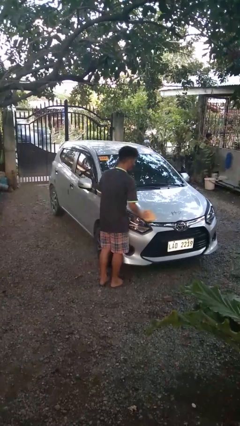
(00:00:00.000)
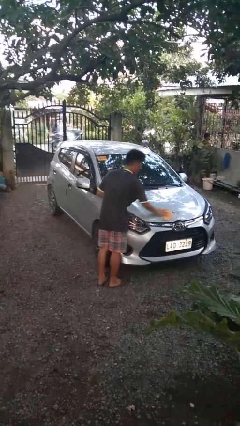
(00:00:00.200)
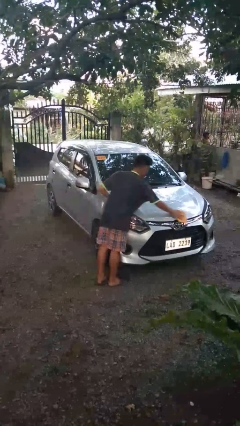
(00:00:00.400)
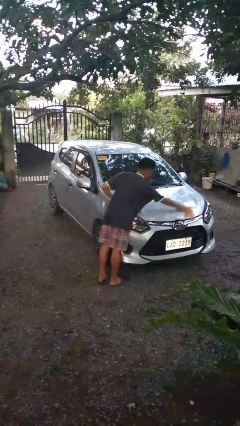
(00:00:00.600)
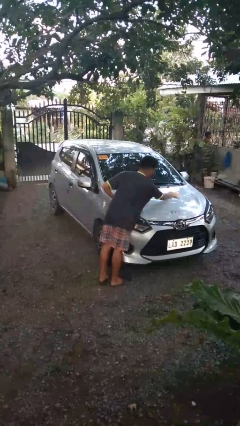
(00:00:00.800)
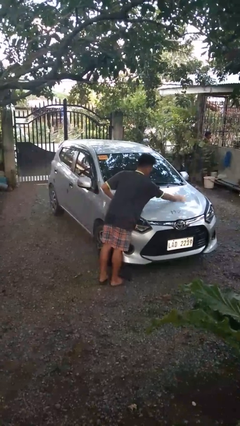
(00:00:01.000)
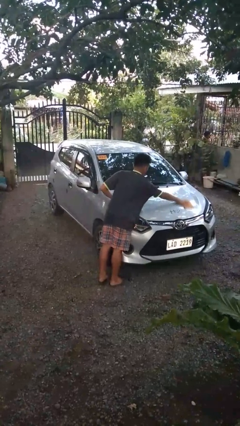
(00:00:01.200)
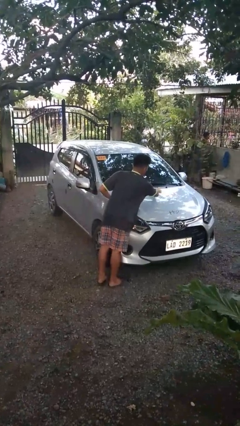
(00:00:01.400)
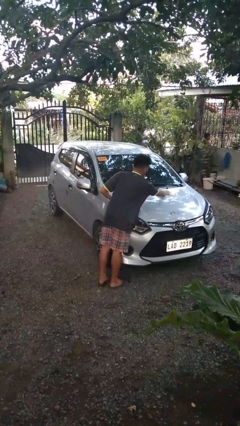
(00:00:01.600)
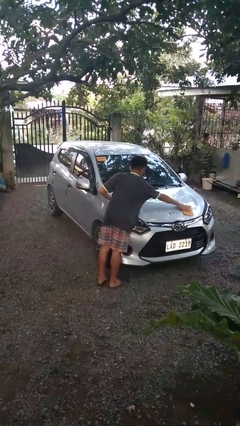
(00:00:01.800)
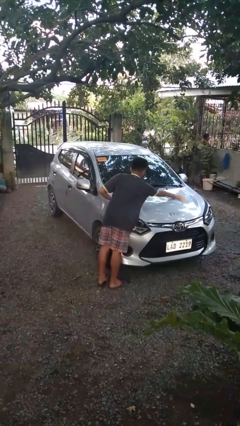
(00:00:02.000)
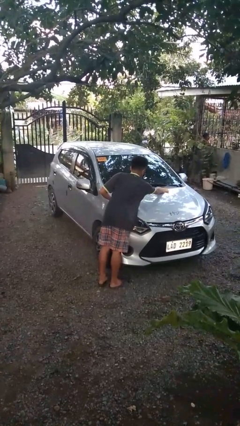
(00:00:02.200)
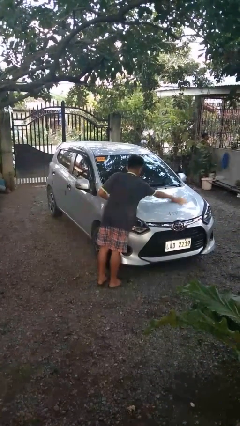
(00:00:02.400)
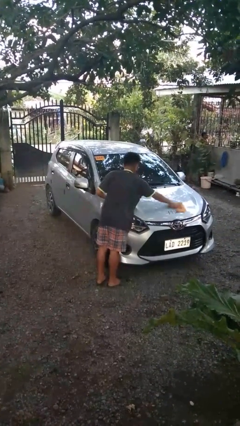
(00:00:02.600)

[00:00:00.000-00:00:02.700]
person polishes car with rag

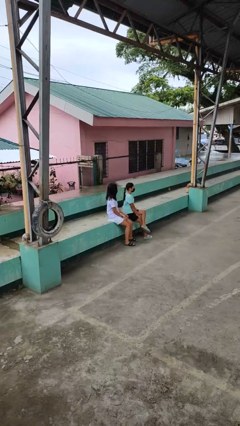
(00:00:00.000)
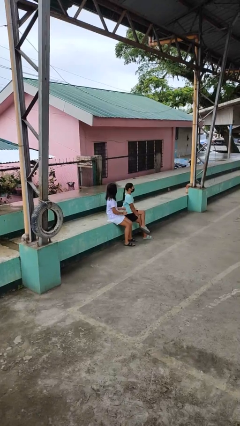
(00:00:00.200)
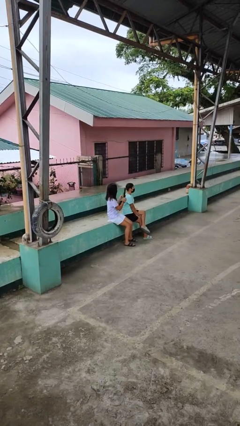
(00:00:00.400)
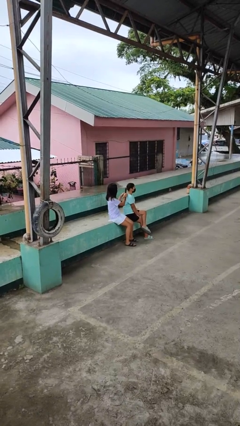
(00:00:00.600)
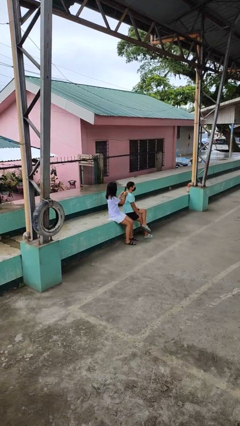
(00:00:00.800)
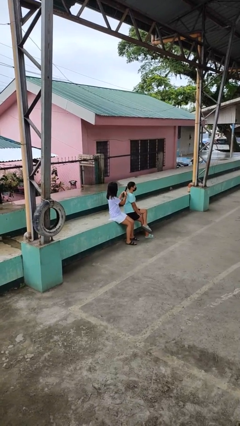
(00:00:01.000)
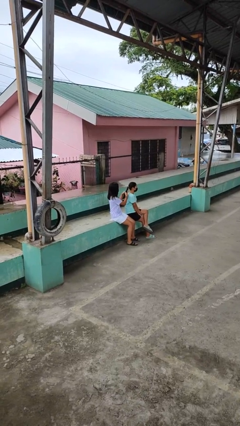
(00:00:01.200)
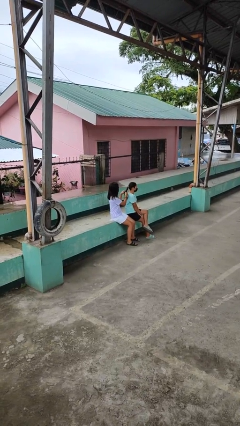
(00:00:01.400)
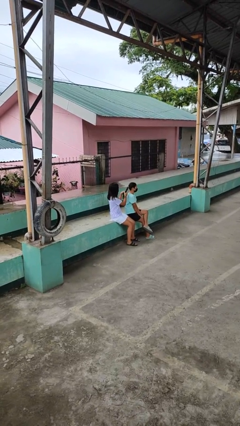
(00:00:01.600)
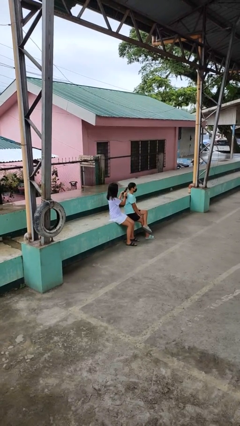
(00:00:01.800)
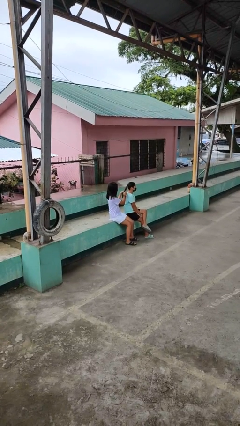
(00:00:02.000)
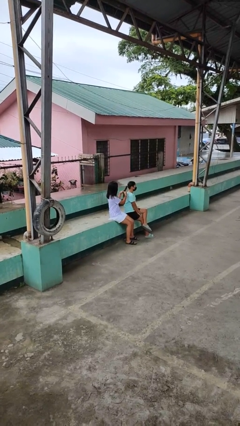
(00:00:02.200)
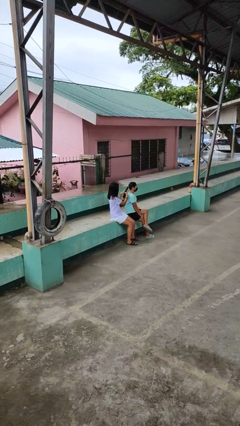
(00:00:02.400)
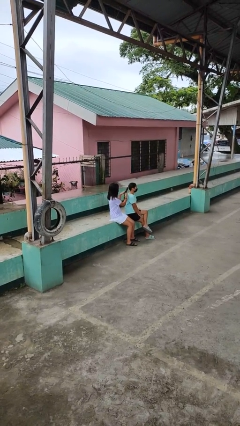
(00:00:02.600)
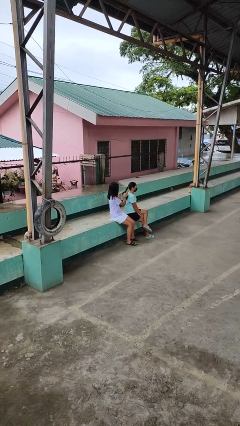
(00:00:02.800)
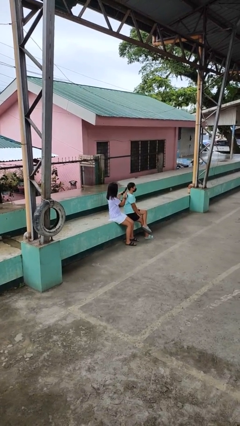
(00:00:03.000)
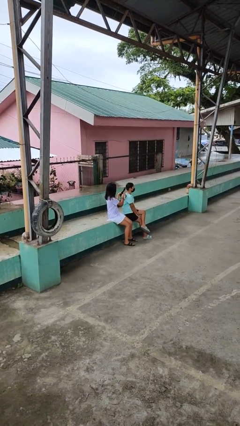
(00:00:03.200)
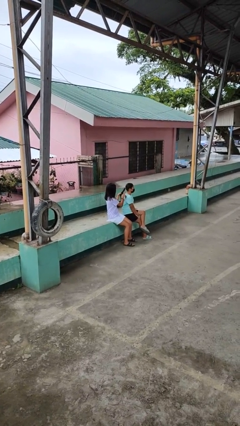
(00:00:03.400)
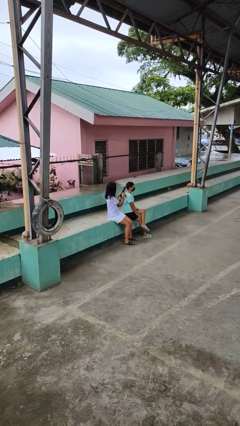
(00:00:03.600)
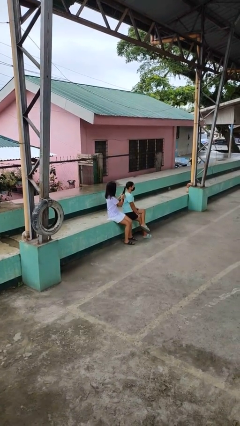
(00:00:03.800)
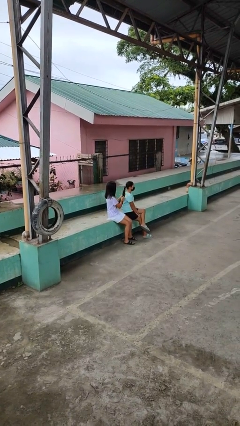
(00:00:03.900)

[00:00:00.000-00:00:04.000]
person braids hair of person

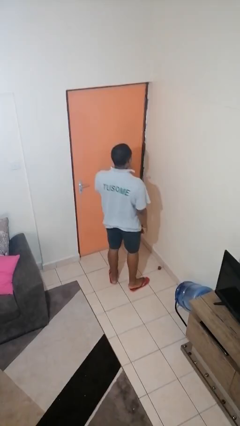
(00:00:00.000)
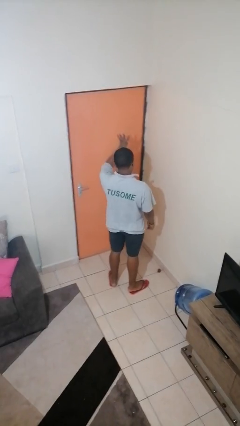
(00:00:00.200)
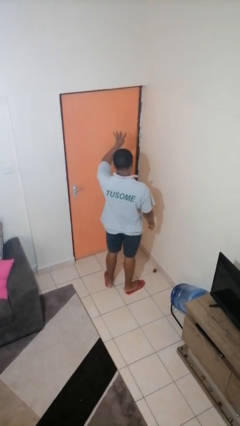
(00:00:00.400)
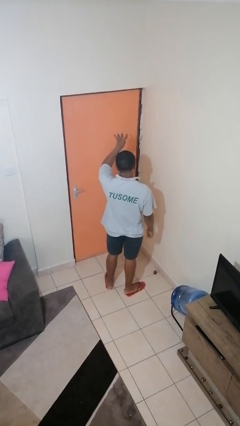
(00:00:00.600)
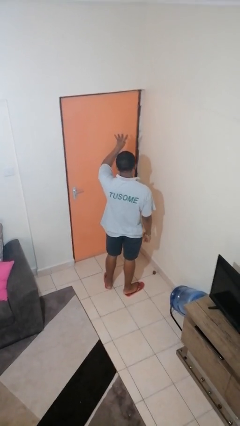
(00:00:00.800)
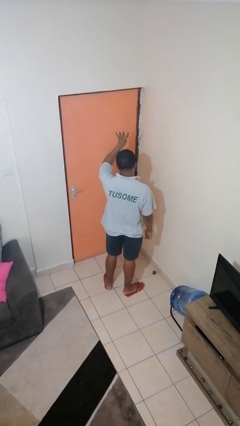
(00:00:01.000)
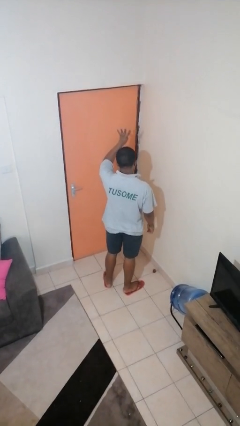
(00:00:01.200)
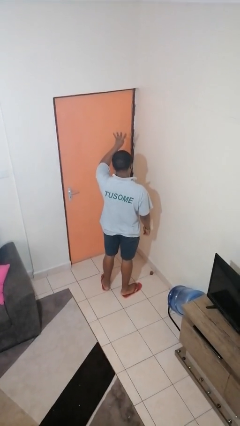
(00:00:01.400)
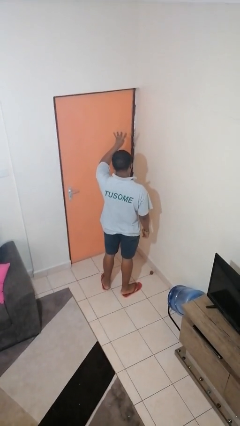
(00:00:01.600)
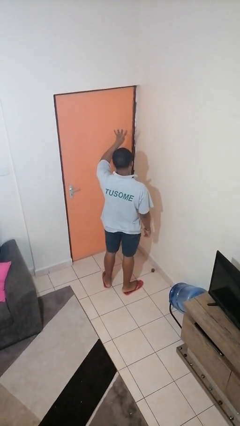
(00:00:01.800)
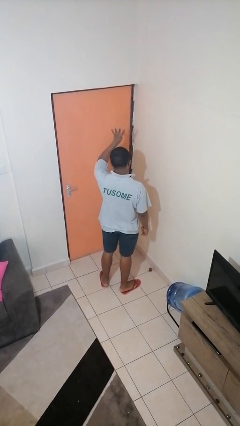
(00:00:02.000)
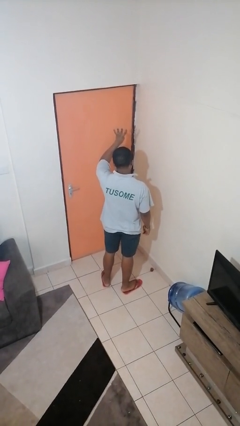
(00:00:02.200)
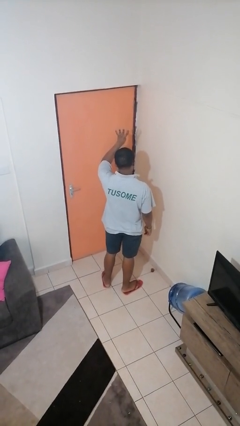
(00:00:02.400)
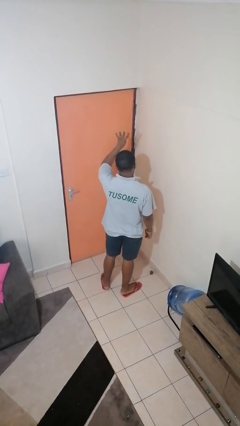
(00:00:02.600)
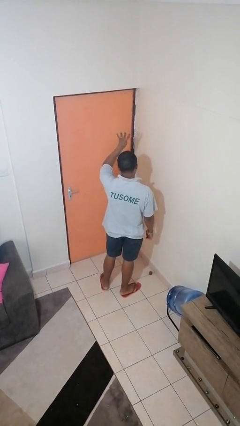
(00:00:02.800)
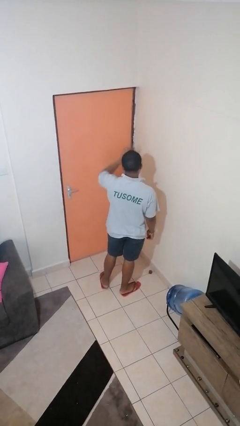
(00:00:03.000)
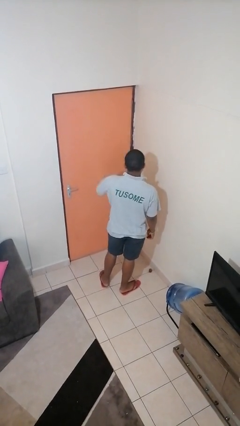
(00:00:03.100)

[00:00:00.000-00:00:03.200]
person gestures number four

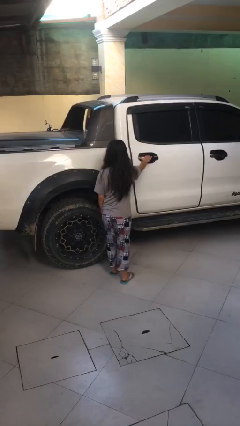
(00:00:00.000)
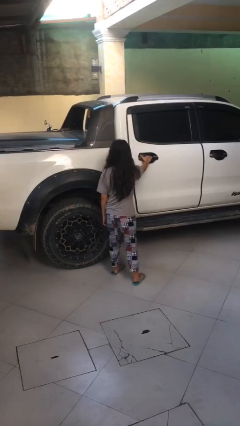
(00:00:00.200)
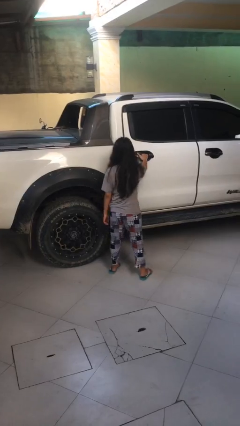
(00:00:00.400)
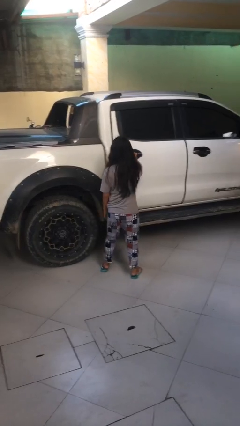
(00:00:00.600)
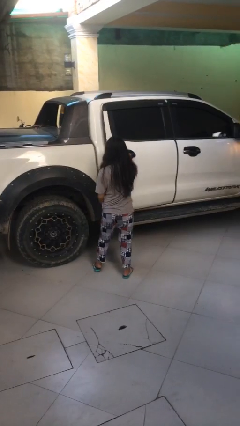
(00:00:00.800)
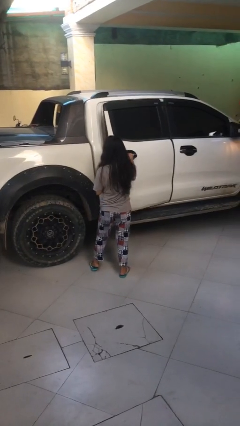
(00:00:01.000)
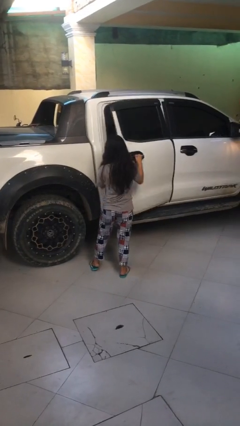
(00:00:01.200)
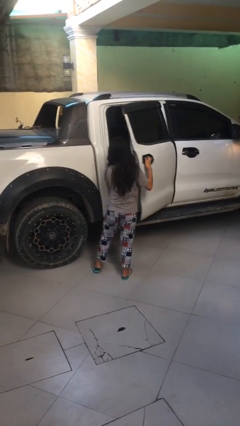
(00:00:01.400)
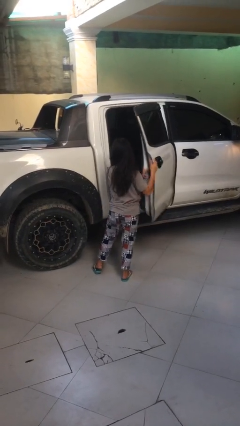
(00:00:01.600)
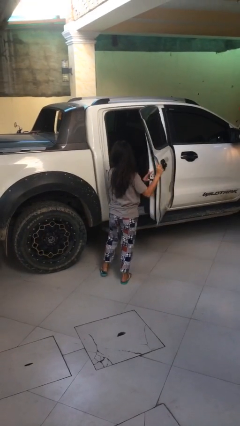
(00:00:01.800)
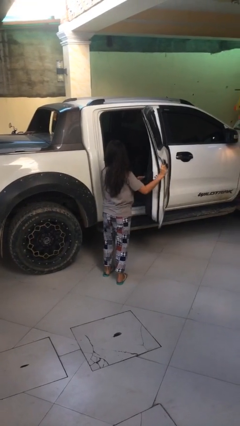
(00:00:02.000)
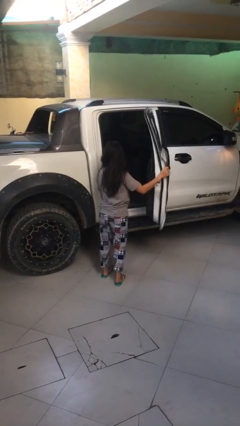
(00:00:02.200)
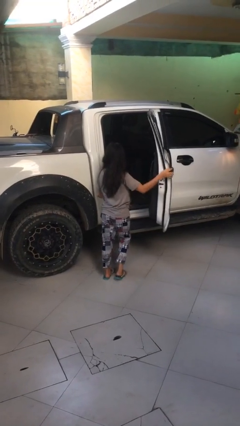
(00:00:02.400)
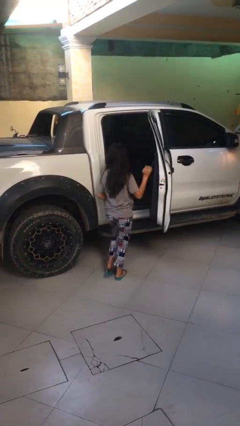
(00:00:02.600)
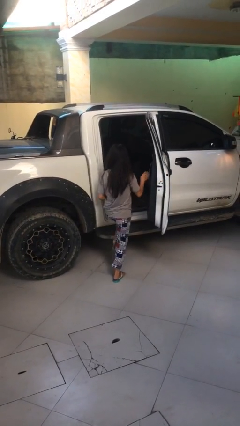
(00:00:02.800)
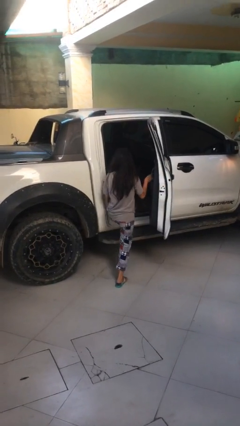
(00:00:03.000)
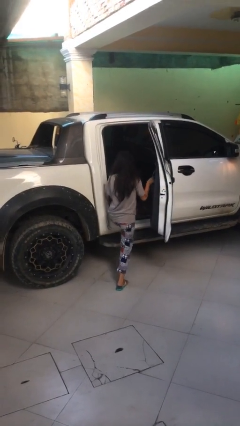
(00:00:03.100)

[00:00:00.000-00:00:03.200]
person opens car door

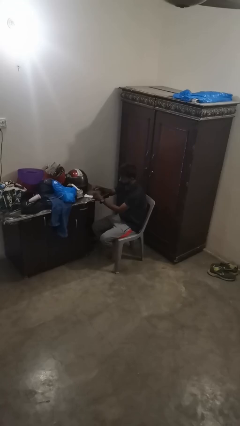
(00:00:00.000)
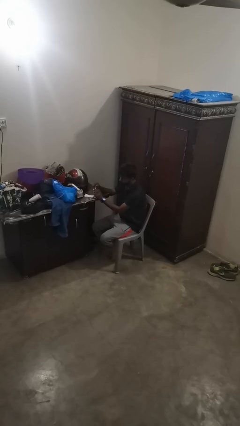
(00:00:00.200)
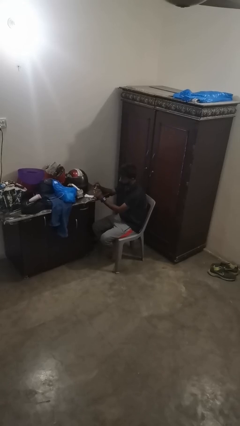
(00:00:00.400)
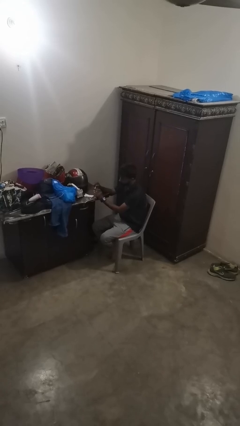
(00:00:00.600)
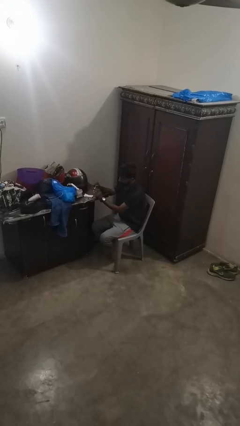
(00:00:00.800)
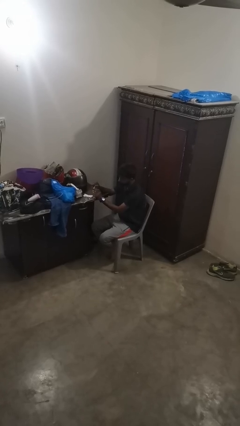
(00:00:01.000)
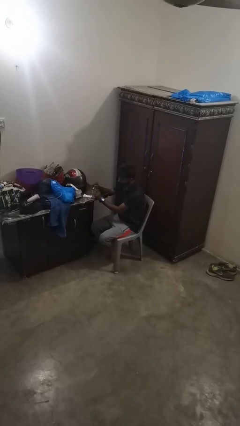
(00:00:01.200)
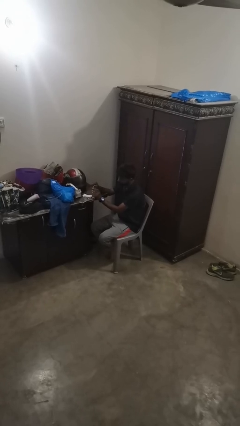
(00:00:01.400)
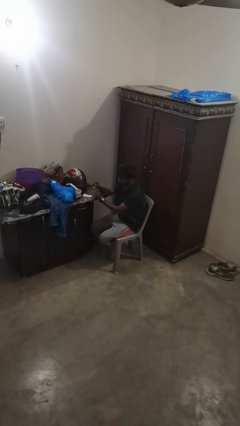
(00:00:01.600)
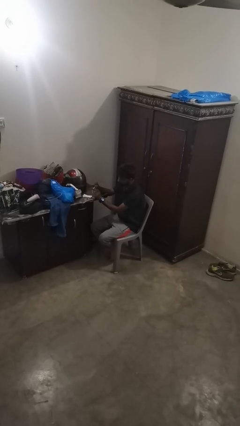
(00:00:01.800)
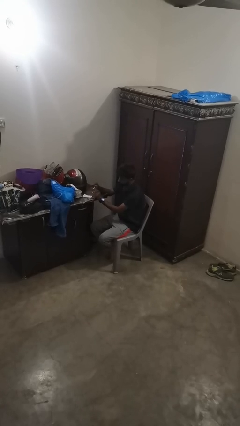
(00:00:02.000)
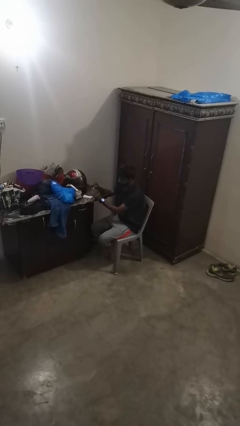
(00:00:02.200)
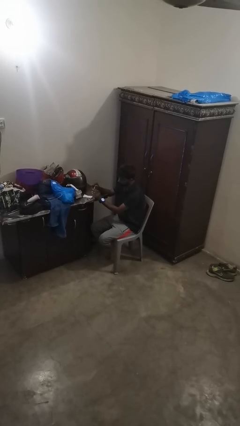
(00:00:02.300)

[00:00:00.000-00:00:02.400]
person paints fingernails

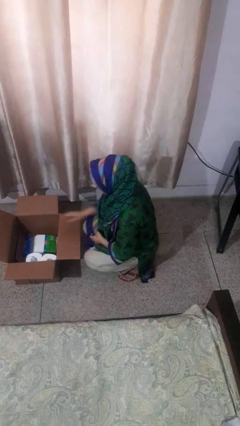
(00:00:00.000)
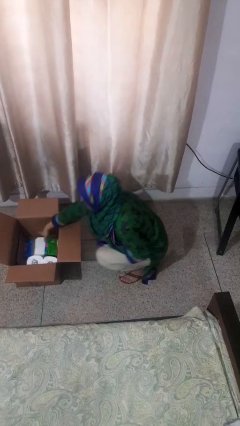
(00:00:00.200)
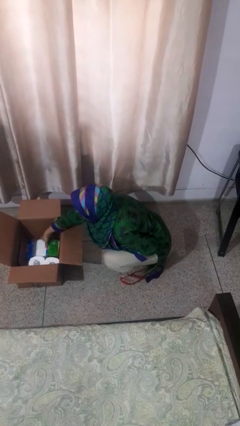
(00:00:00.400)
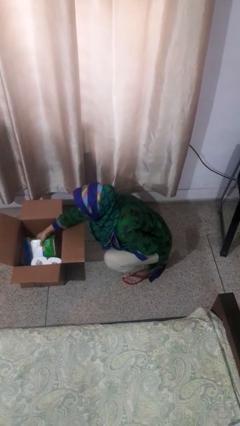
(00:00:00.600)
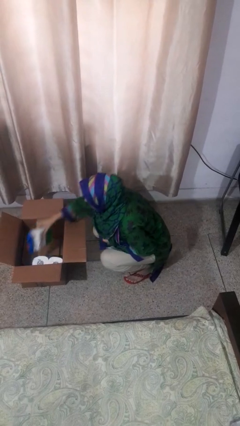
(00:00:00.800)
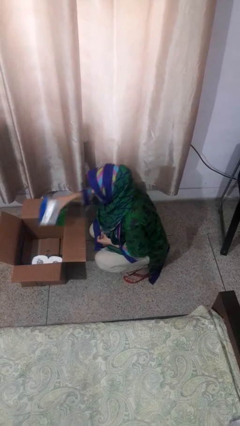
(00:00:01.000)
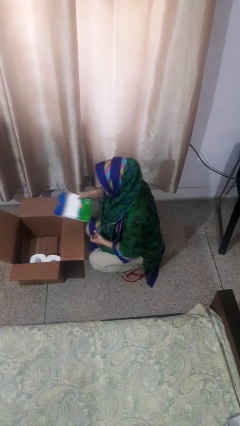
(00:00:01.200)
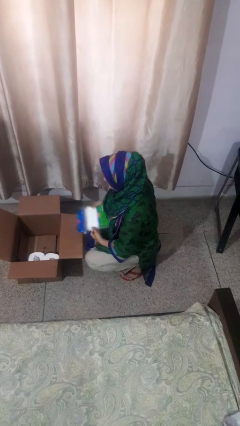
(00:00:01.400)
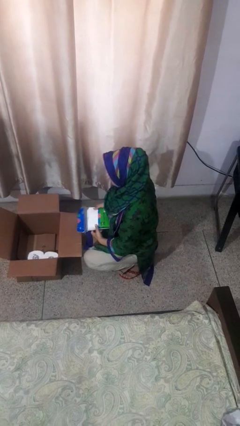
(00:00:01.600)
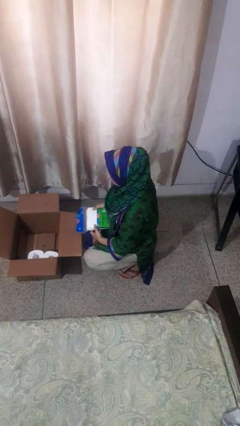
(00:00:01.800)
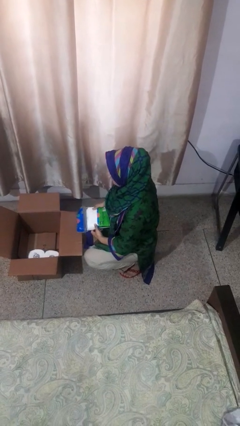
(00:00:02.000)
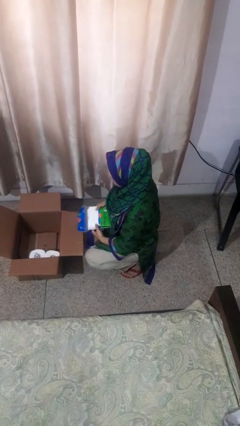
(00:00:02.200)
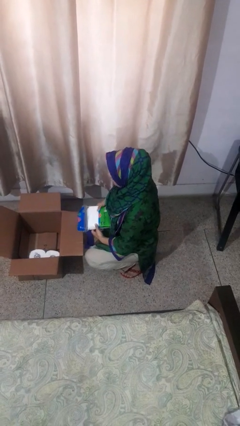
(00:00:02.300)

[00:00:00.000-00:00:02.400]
person takes object from box
